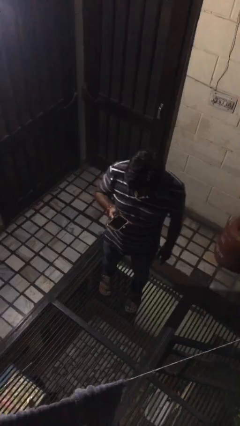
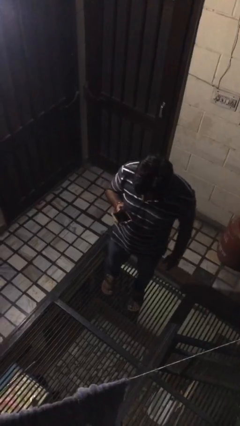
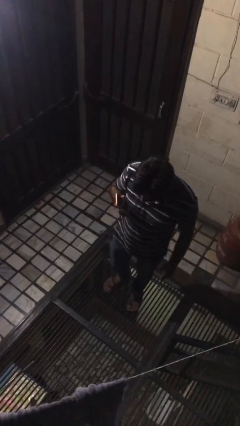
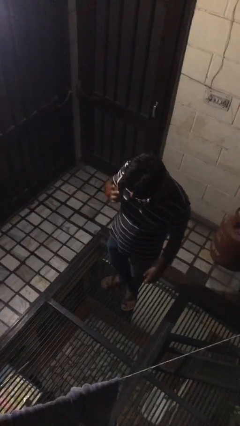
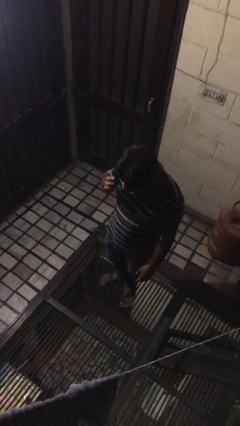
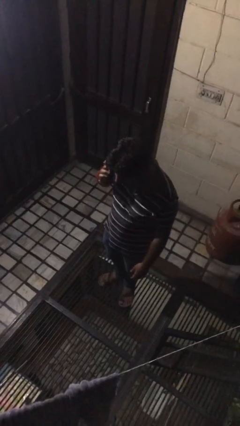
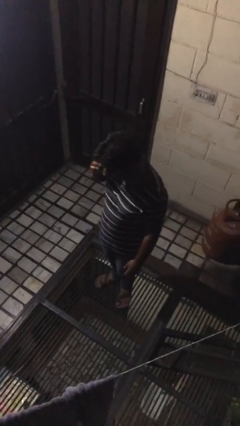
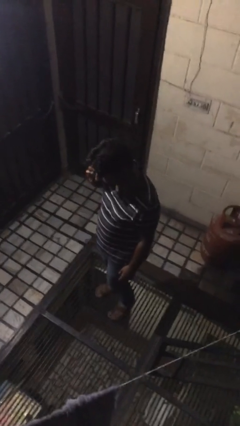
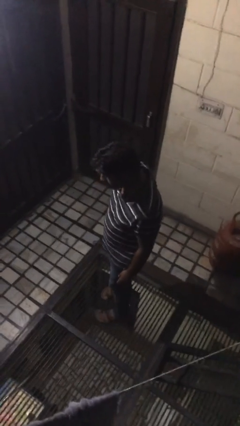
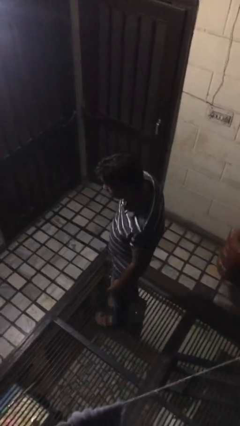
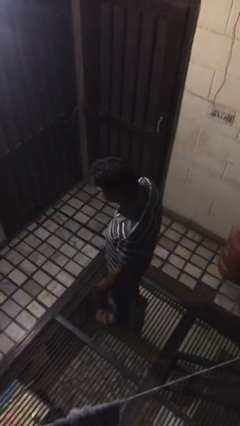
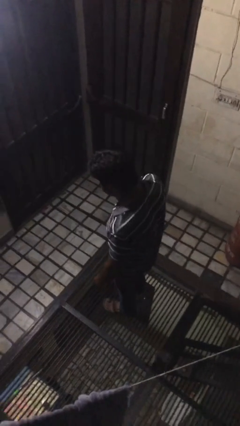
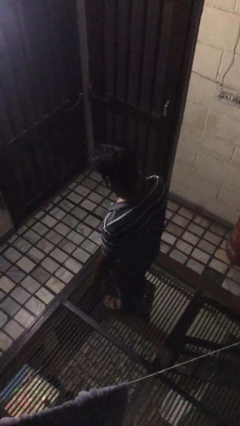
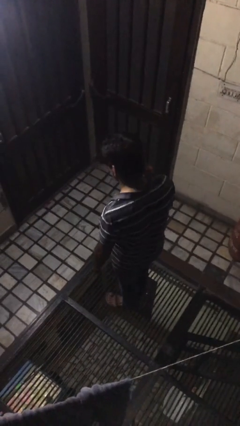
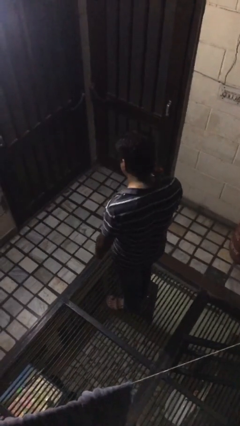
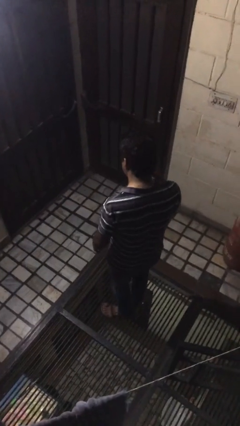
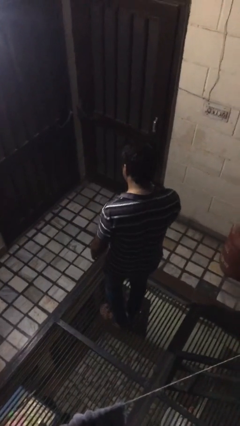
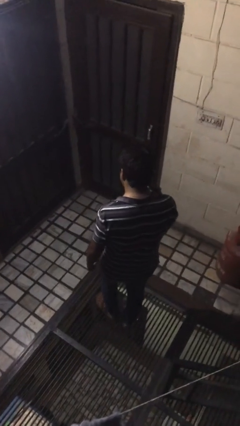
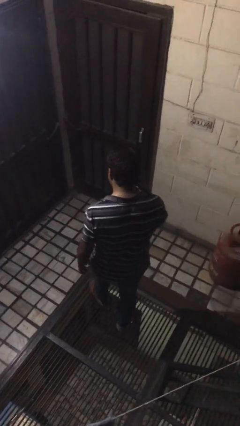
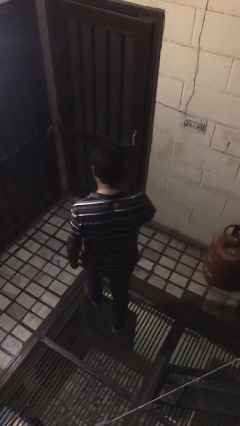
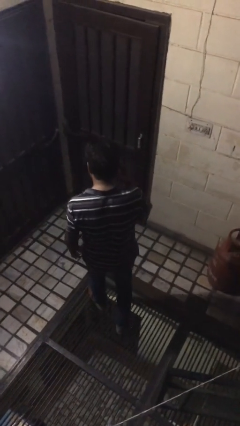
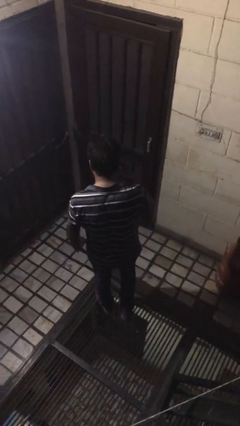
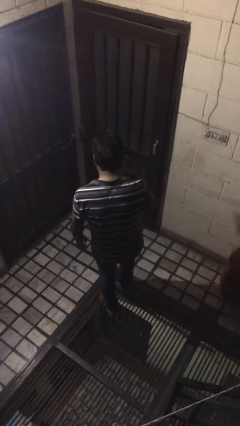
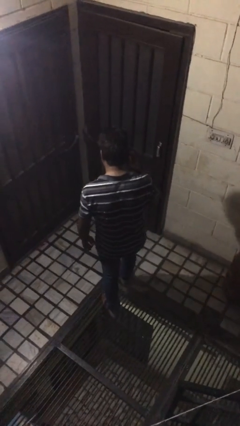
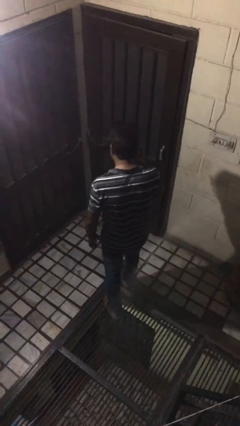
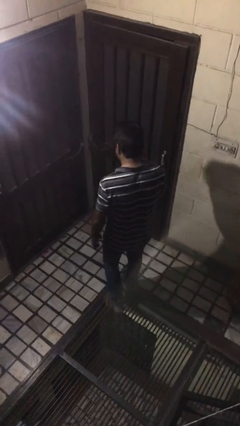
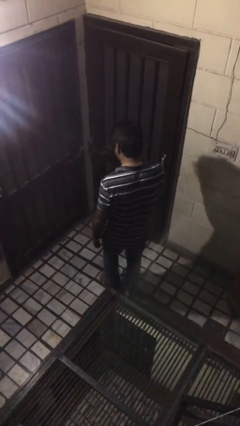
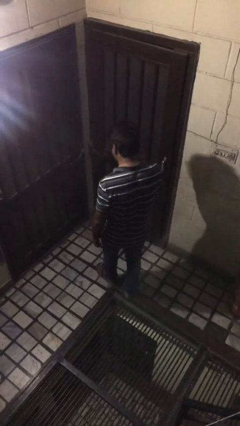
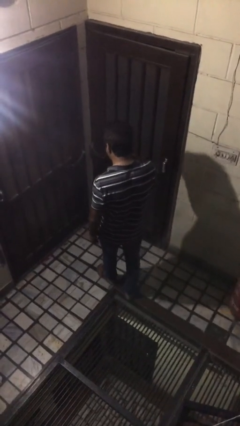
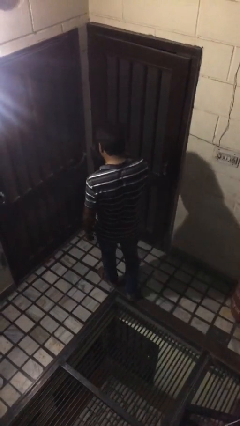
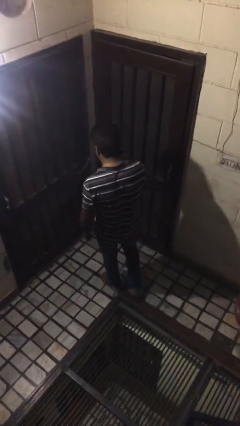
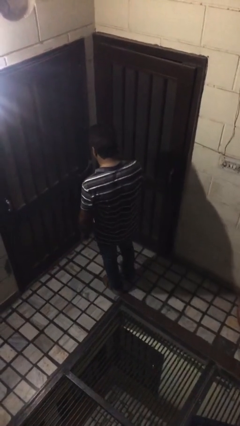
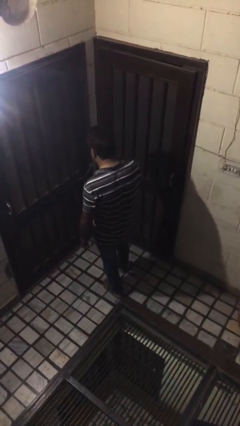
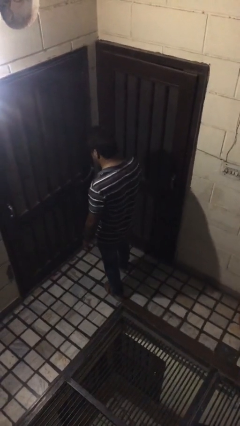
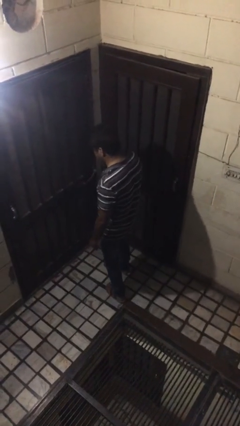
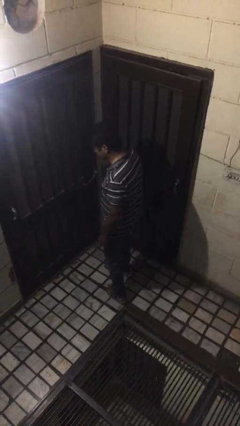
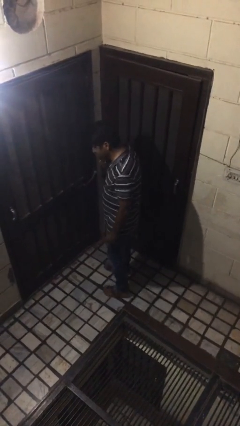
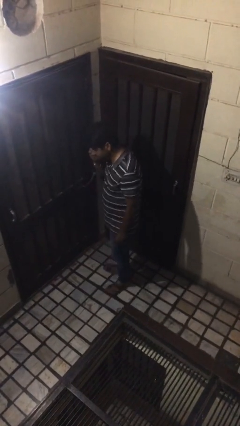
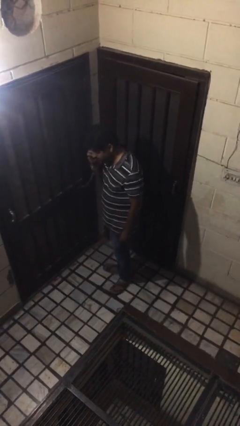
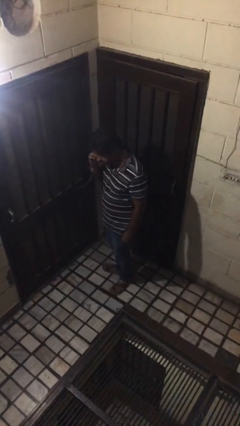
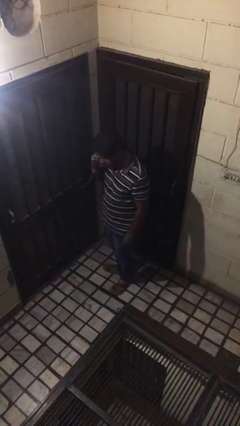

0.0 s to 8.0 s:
person talks on phone

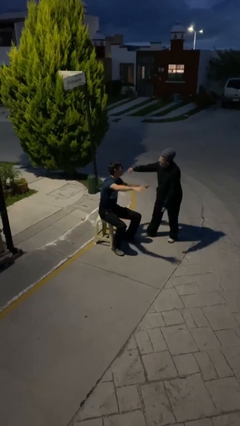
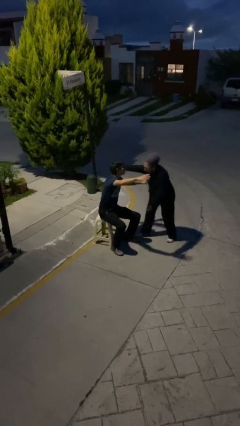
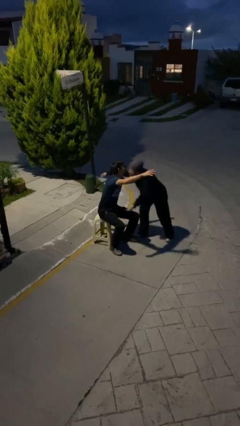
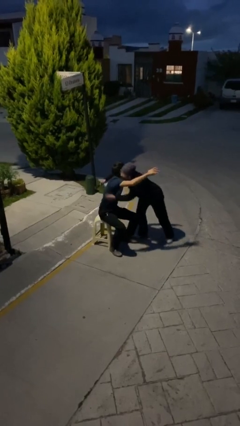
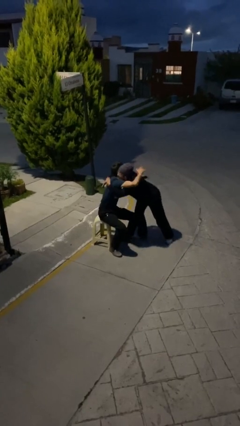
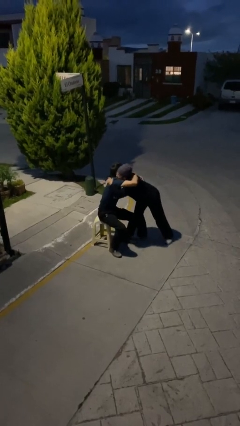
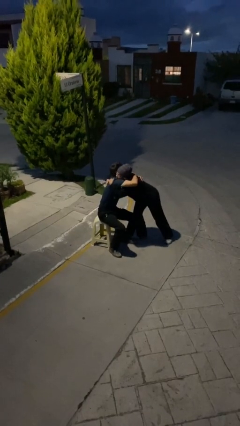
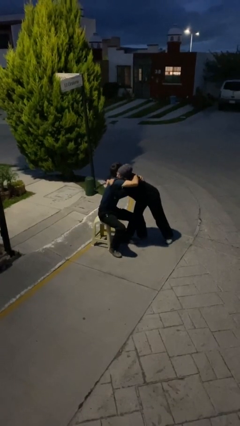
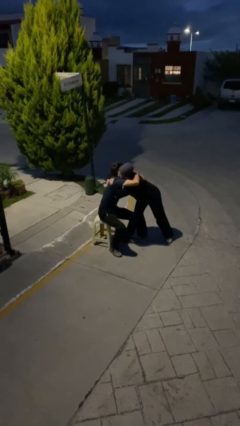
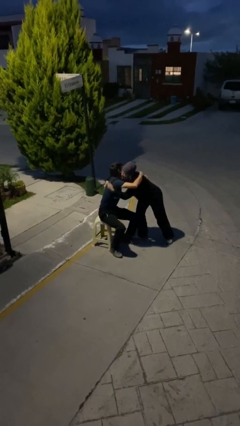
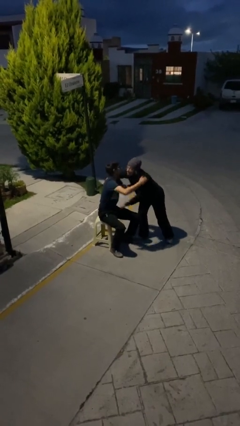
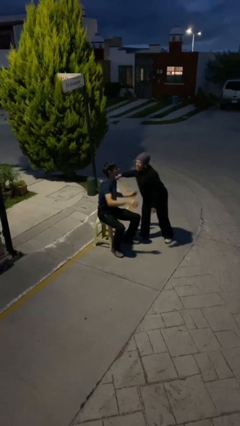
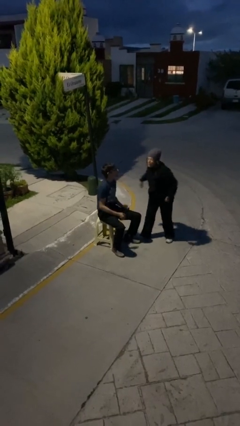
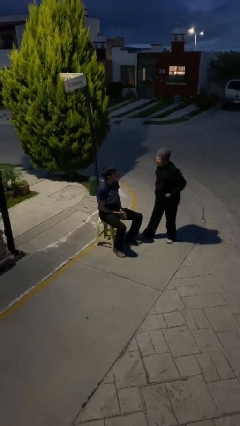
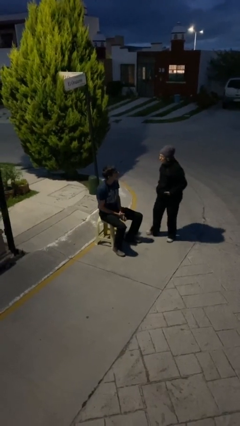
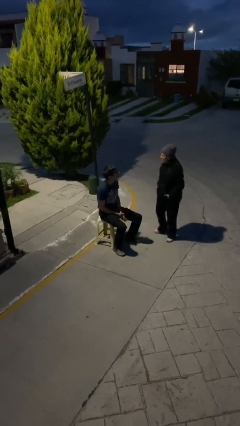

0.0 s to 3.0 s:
person embraces person

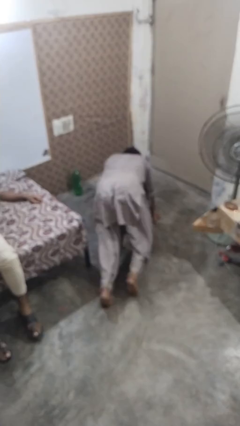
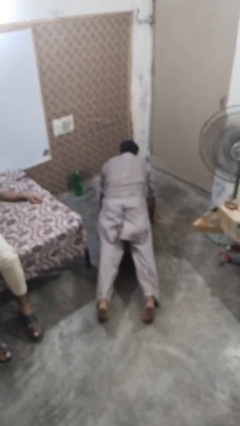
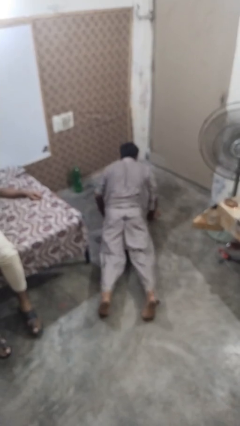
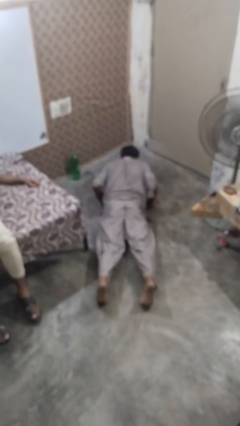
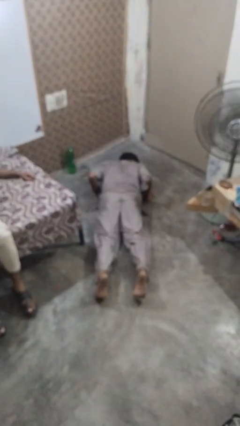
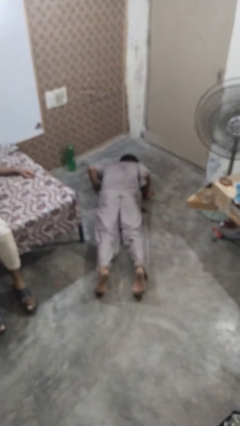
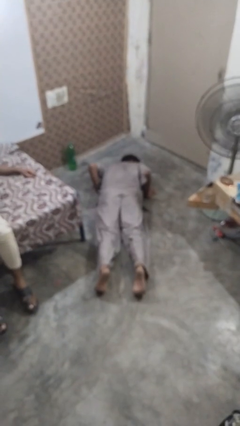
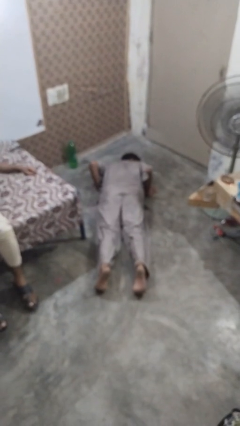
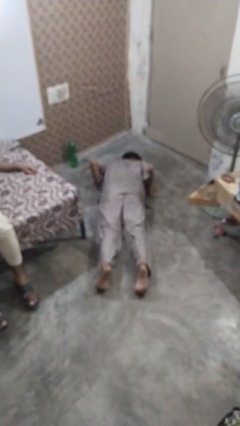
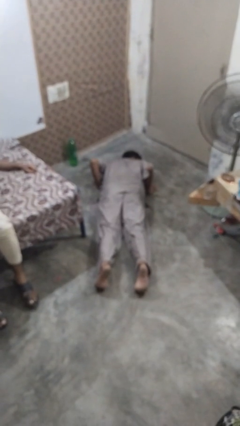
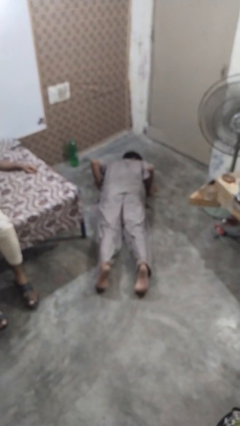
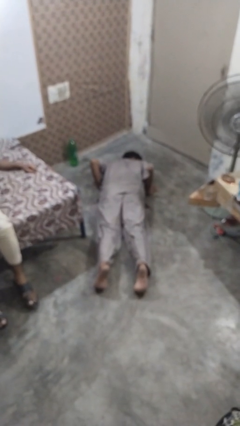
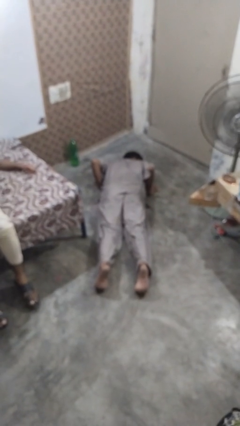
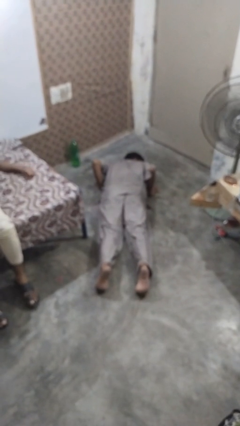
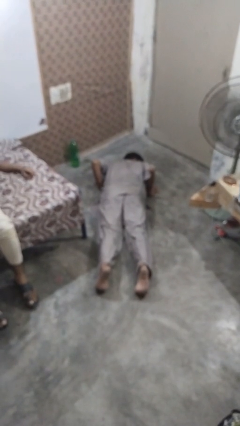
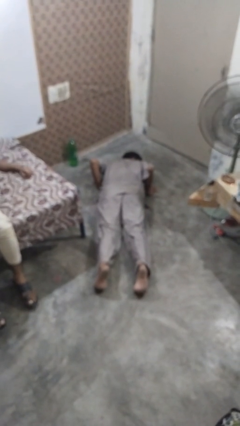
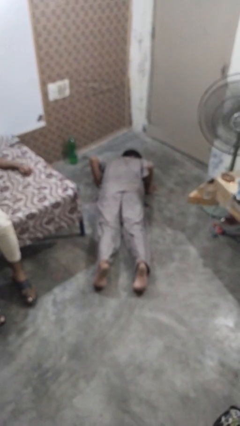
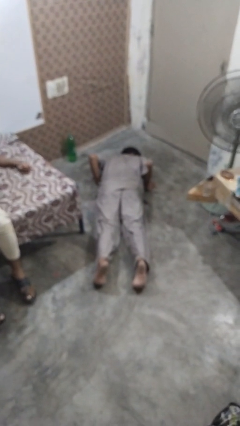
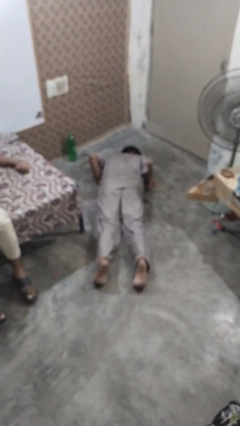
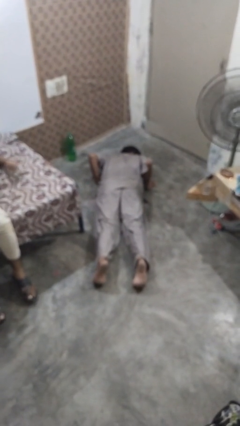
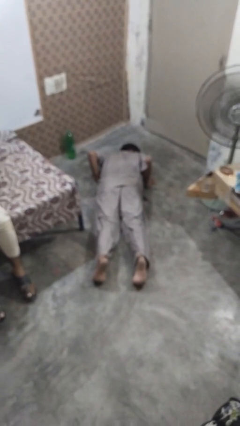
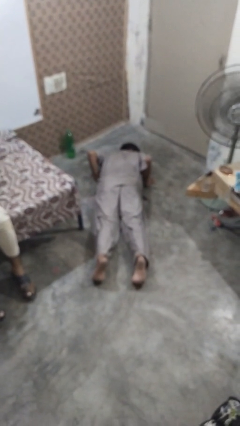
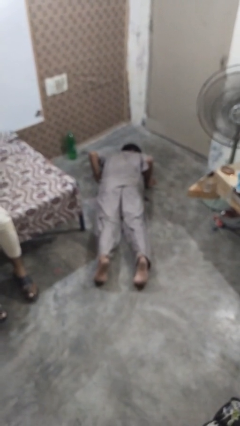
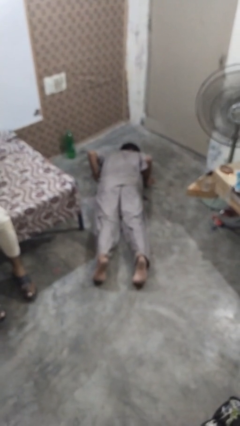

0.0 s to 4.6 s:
person lies down on floor

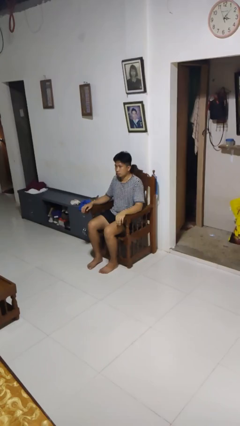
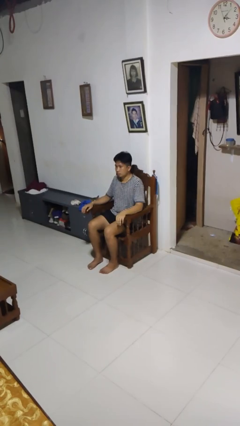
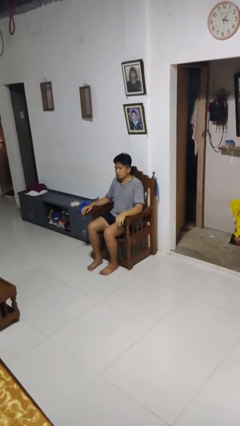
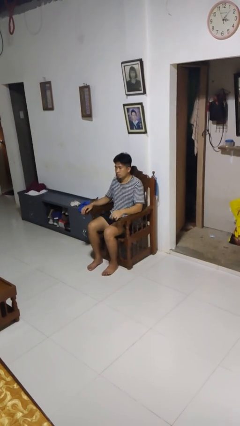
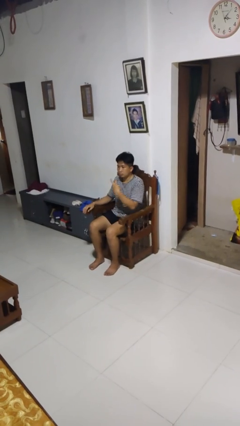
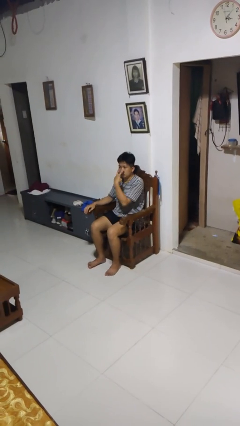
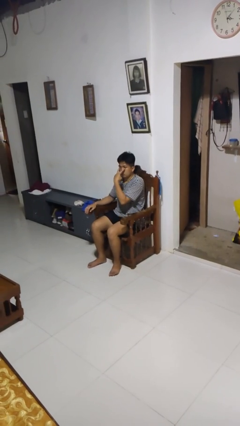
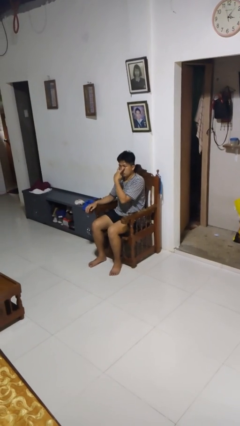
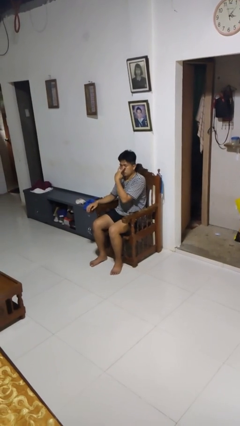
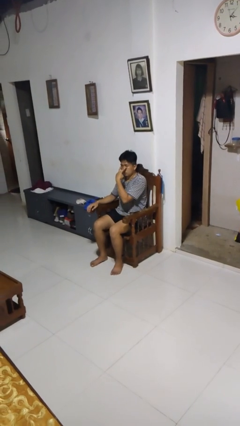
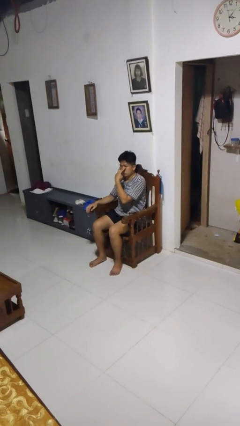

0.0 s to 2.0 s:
person gestures watch closely

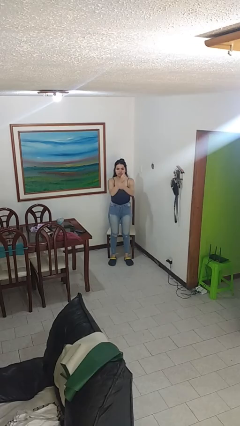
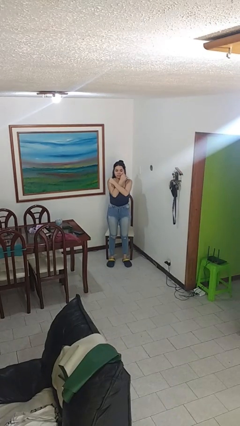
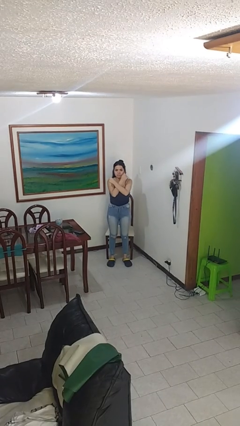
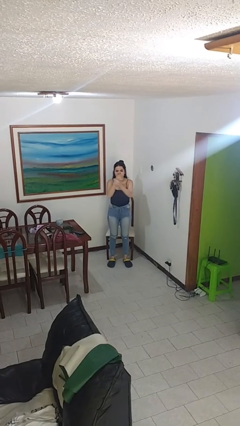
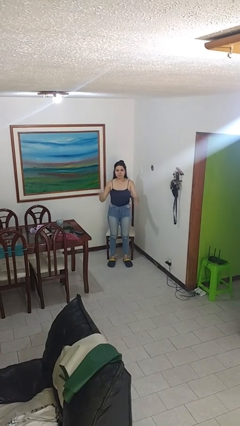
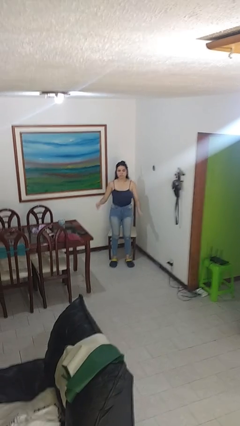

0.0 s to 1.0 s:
person gestures arms x
